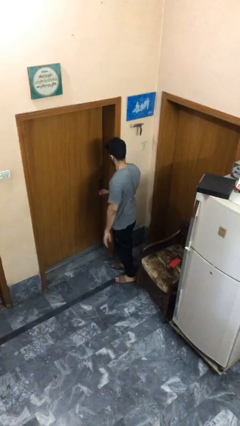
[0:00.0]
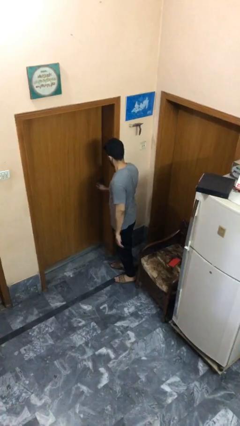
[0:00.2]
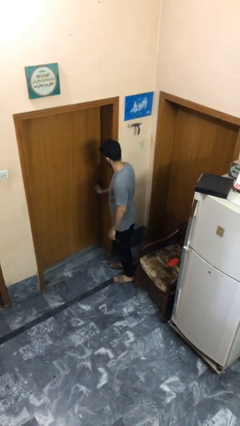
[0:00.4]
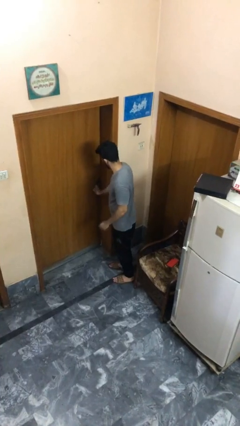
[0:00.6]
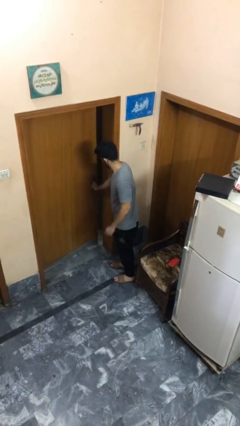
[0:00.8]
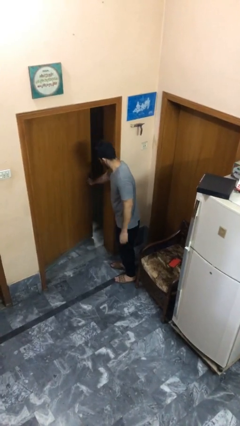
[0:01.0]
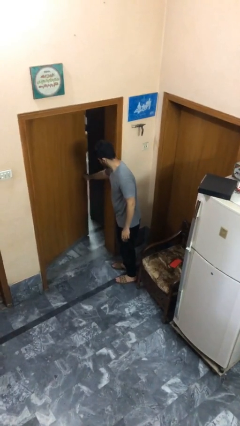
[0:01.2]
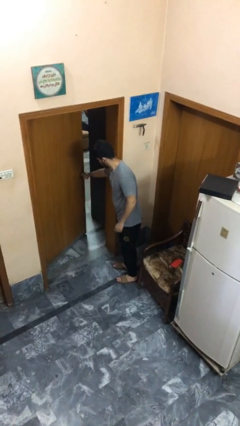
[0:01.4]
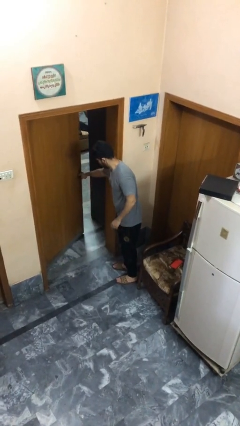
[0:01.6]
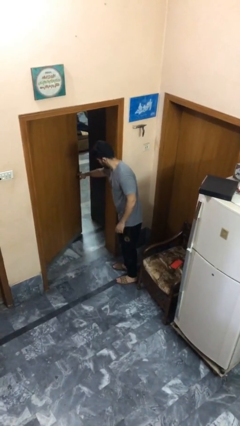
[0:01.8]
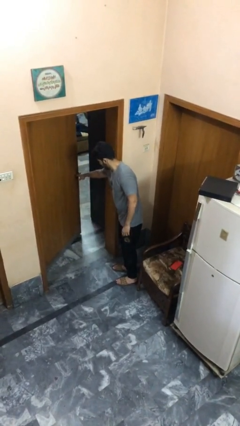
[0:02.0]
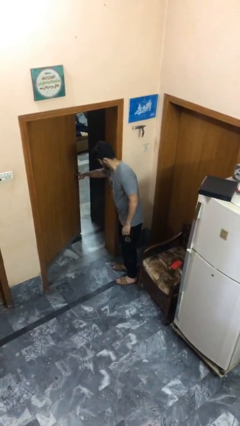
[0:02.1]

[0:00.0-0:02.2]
person opens facility door

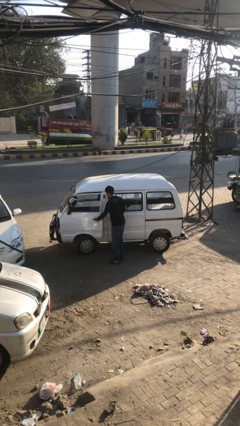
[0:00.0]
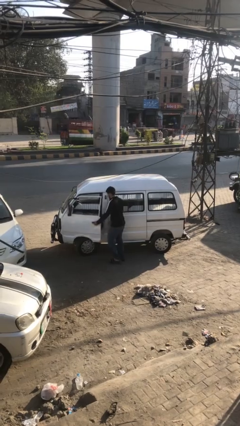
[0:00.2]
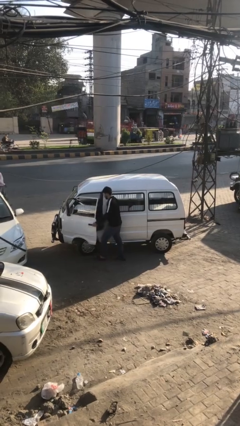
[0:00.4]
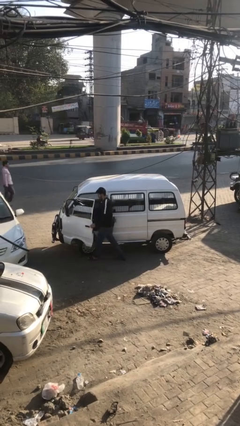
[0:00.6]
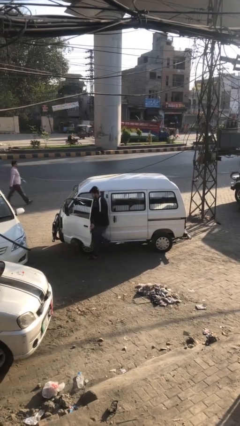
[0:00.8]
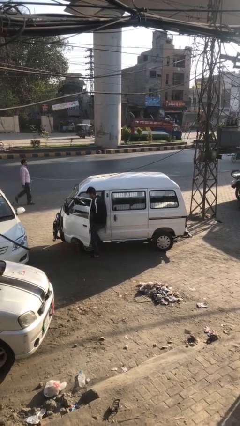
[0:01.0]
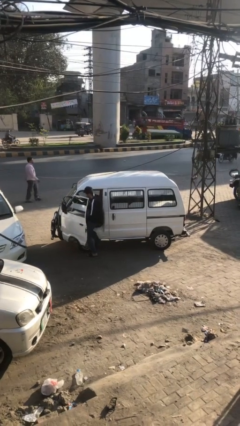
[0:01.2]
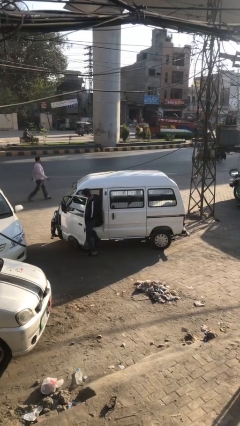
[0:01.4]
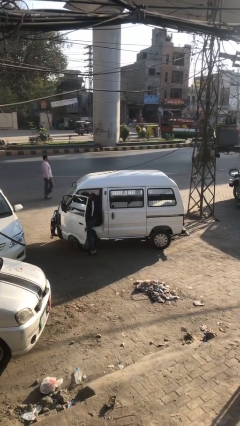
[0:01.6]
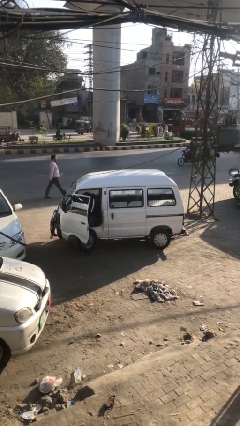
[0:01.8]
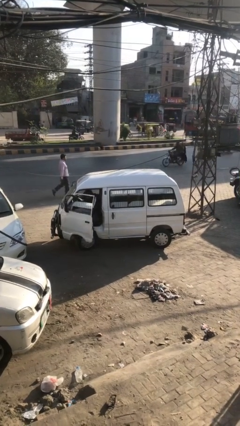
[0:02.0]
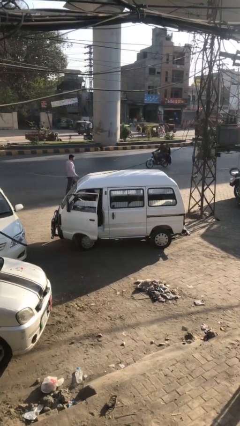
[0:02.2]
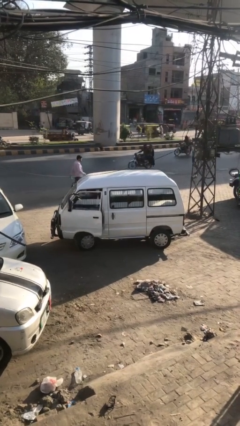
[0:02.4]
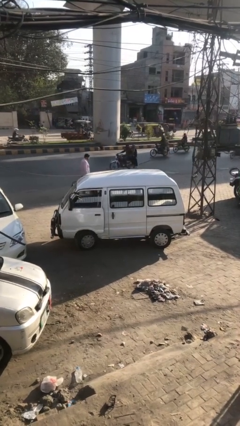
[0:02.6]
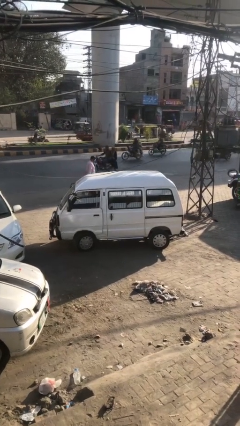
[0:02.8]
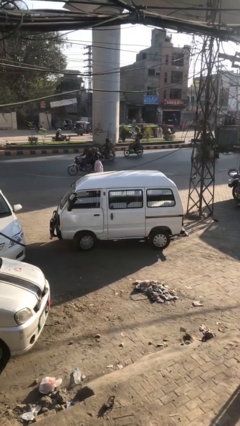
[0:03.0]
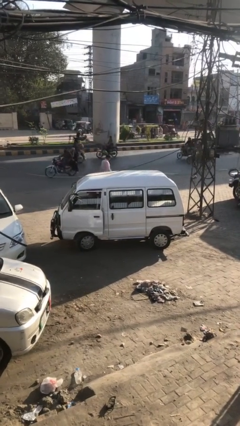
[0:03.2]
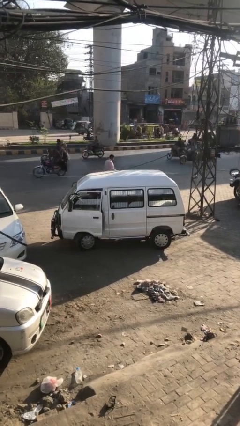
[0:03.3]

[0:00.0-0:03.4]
car picks up person

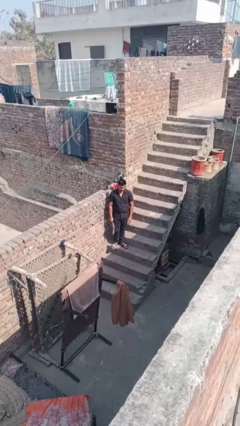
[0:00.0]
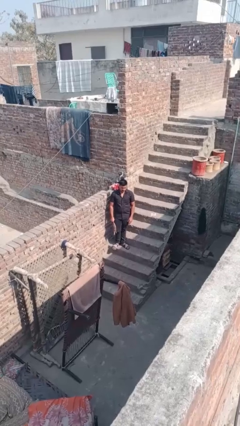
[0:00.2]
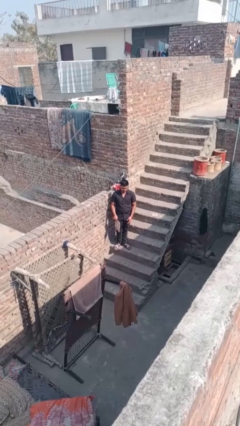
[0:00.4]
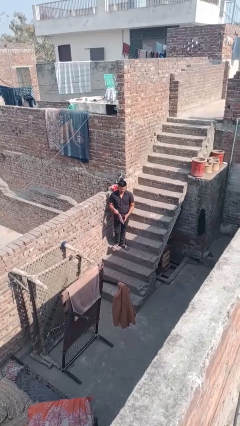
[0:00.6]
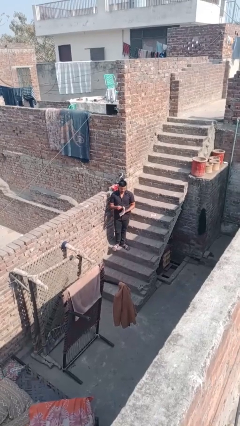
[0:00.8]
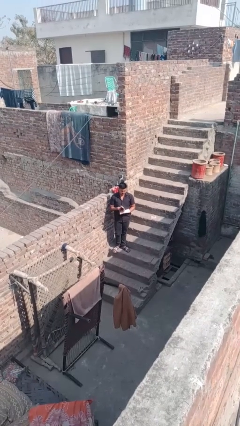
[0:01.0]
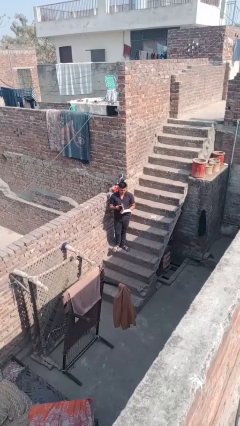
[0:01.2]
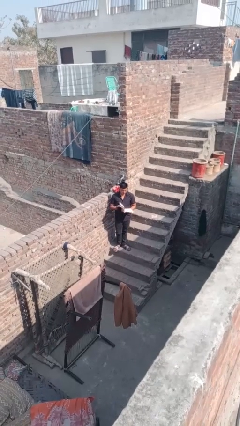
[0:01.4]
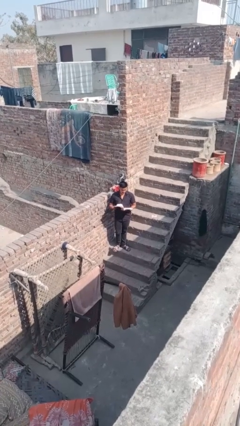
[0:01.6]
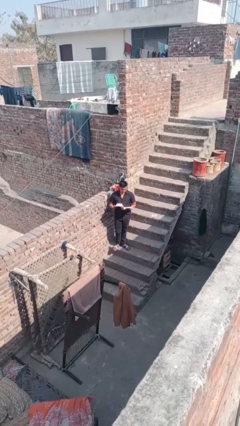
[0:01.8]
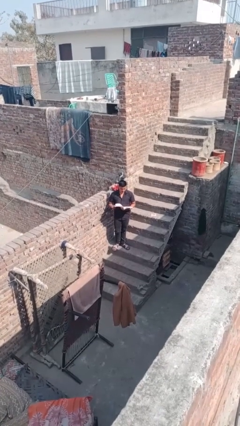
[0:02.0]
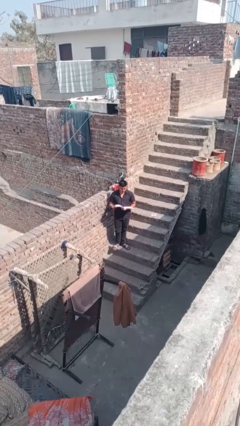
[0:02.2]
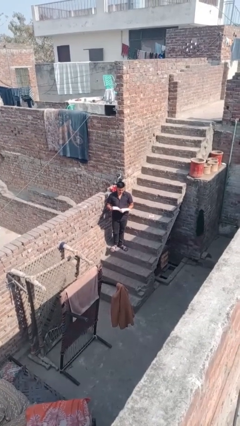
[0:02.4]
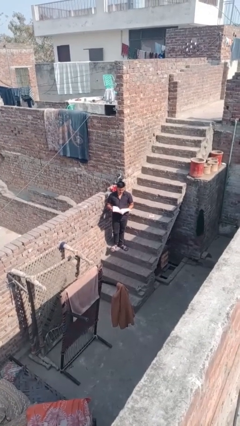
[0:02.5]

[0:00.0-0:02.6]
person reads document

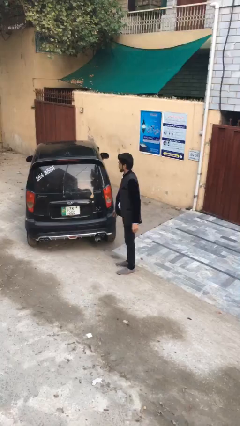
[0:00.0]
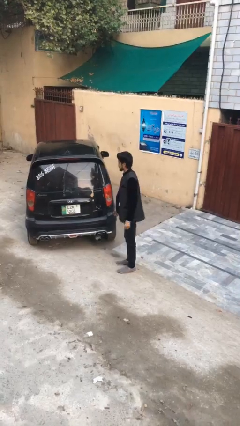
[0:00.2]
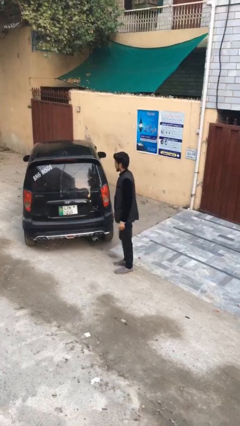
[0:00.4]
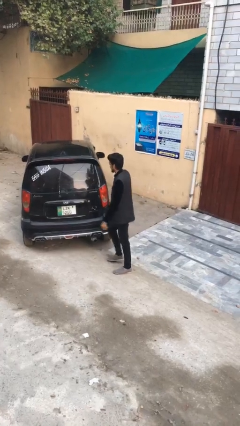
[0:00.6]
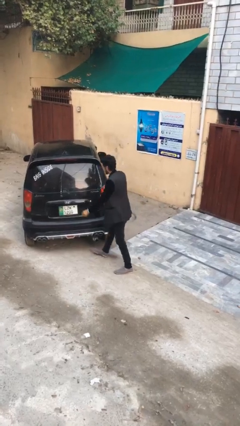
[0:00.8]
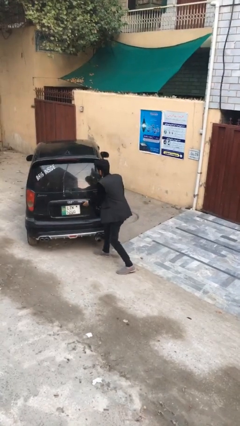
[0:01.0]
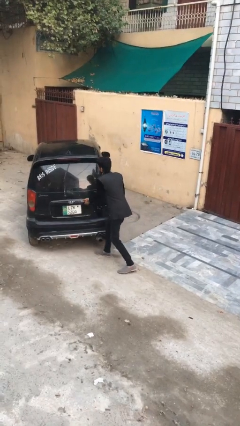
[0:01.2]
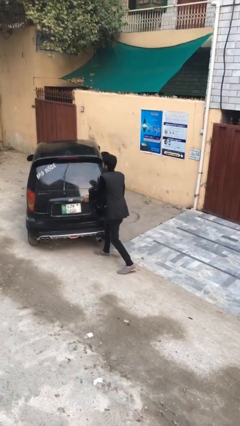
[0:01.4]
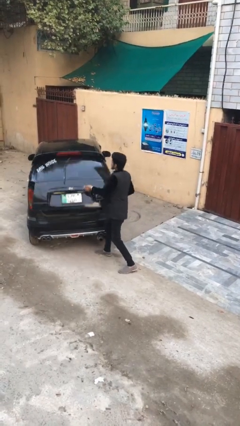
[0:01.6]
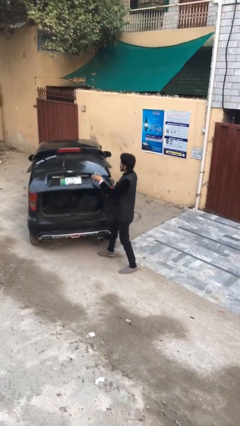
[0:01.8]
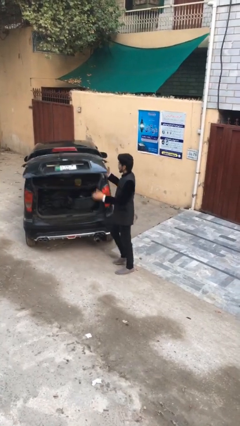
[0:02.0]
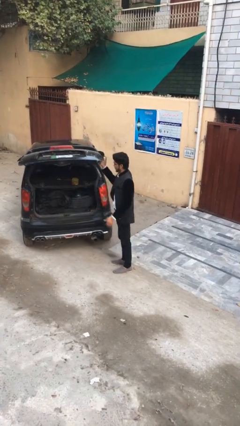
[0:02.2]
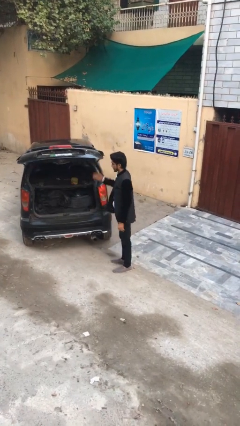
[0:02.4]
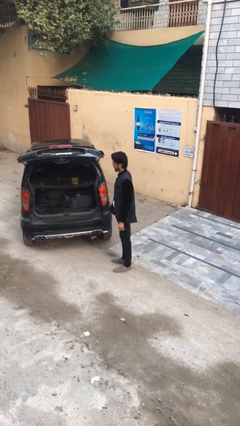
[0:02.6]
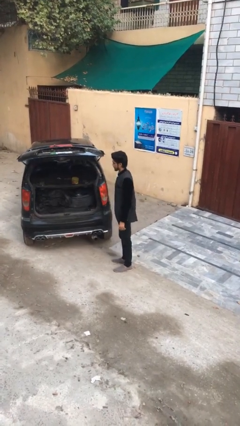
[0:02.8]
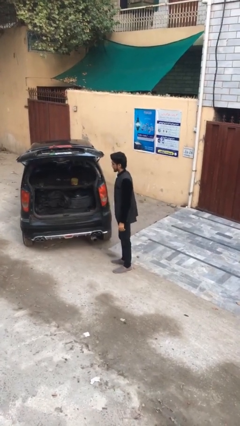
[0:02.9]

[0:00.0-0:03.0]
person opens car trunk

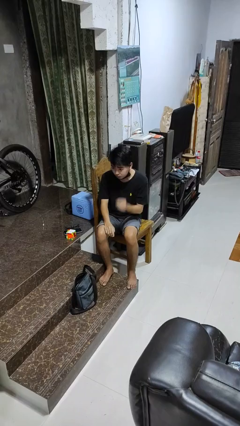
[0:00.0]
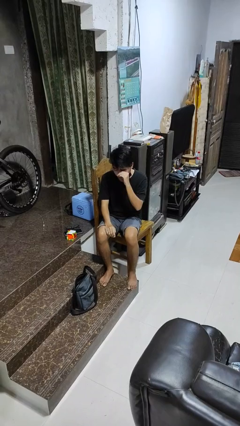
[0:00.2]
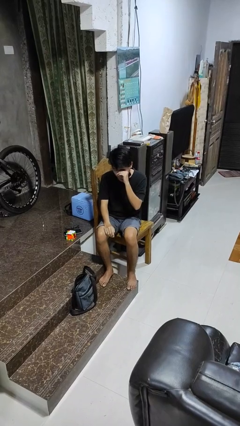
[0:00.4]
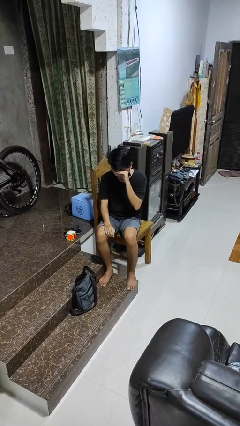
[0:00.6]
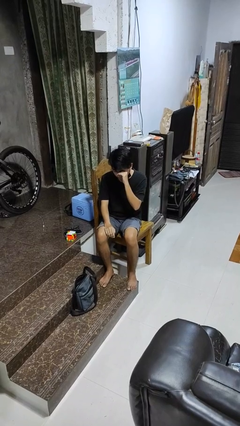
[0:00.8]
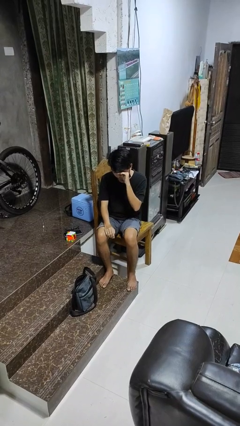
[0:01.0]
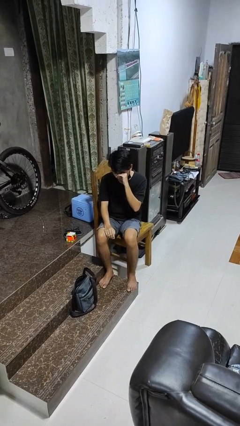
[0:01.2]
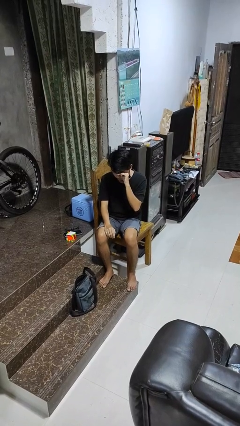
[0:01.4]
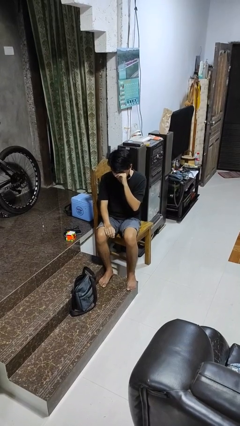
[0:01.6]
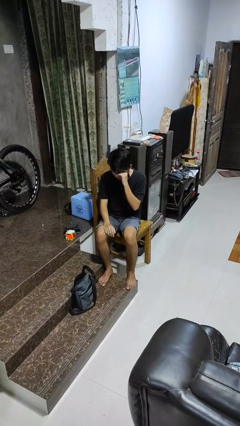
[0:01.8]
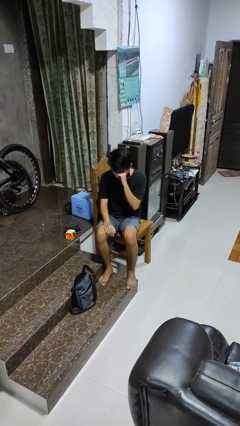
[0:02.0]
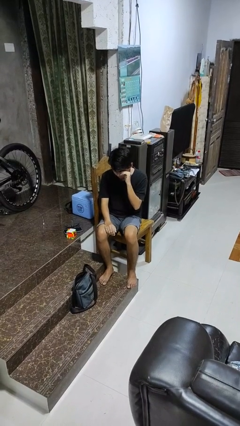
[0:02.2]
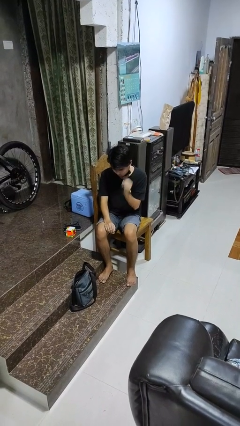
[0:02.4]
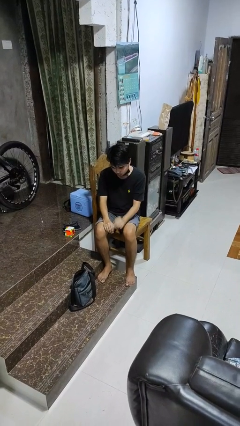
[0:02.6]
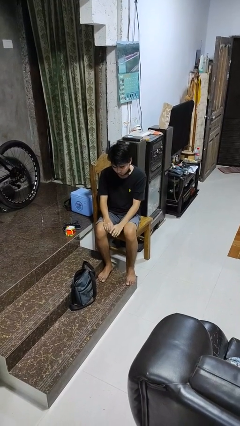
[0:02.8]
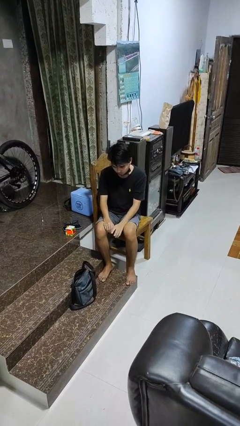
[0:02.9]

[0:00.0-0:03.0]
person rubs eyes

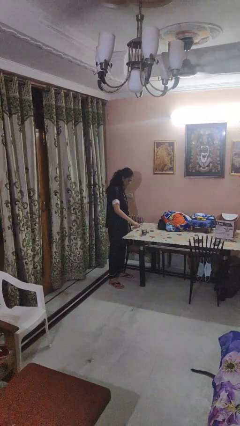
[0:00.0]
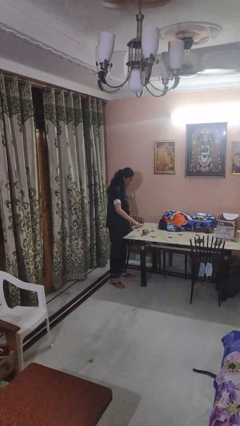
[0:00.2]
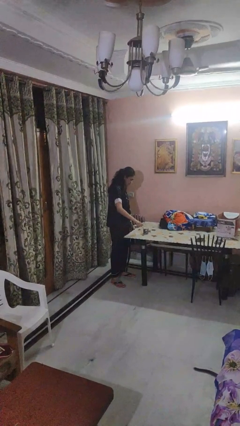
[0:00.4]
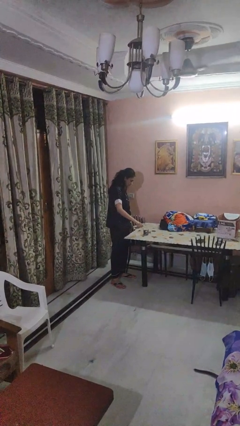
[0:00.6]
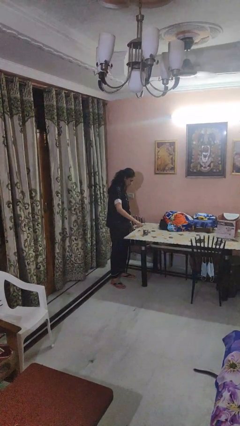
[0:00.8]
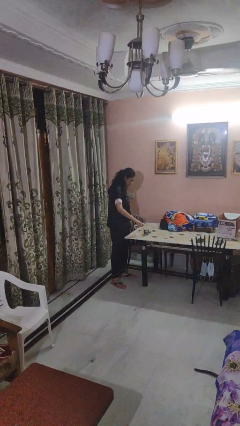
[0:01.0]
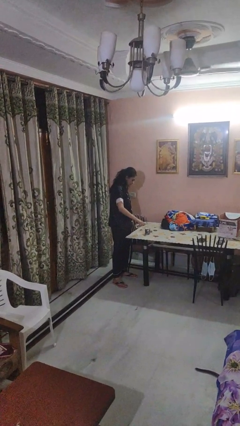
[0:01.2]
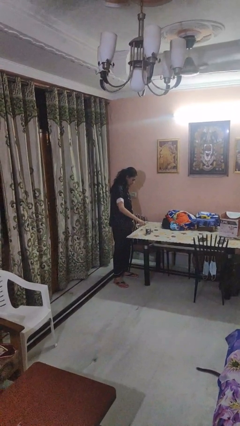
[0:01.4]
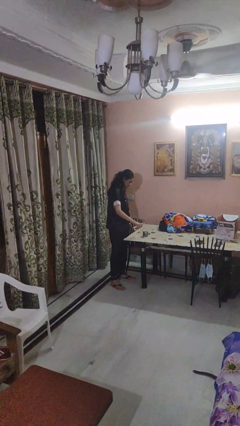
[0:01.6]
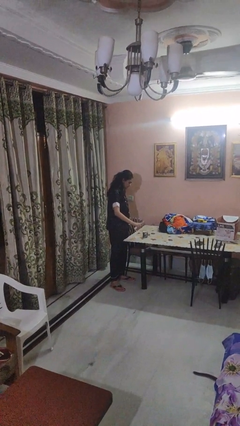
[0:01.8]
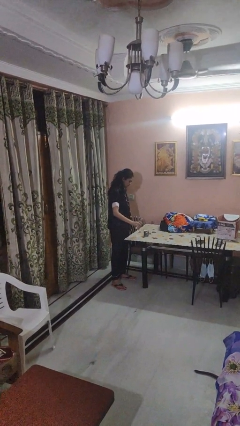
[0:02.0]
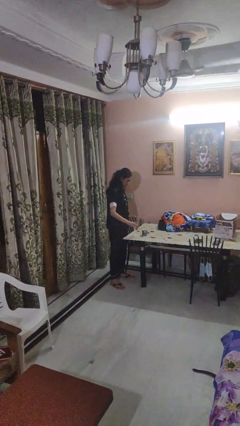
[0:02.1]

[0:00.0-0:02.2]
person pours liquid into cup

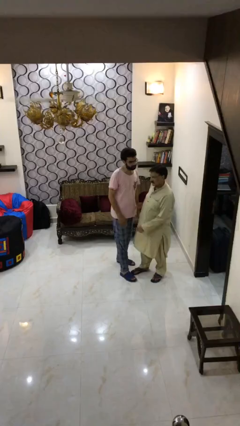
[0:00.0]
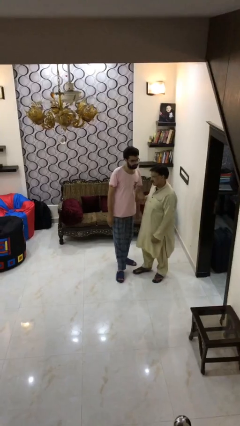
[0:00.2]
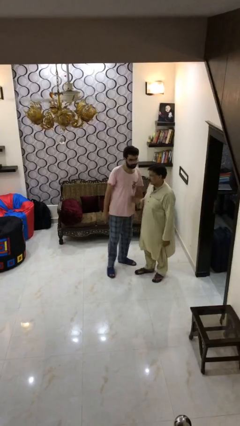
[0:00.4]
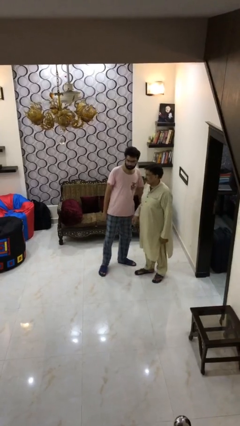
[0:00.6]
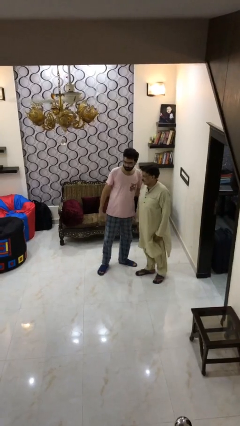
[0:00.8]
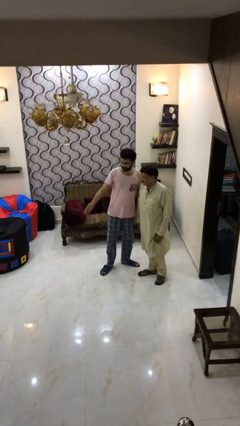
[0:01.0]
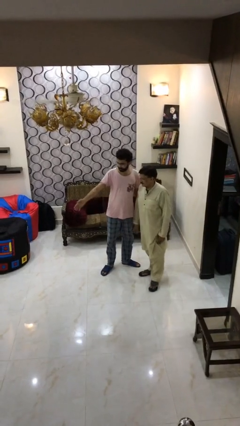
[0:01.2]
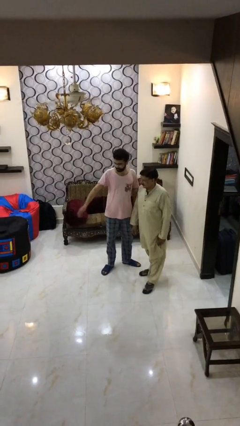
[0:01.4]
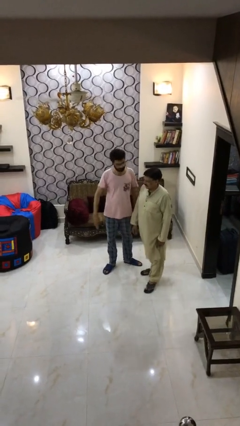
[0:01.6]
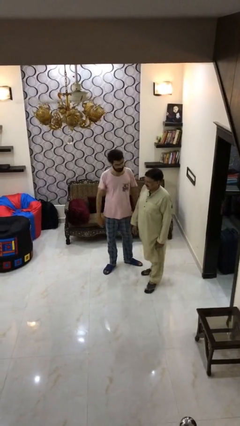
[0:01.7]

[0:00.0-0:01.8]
person talks to person
